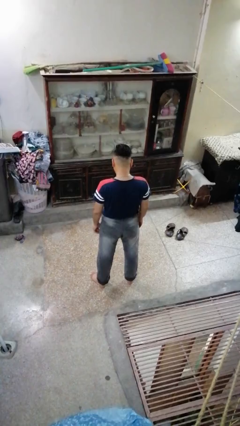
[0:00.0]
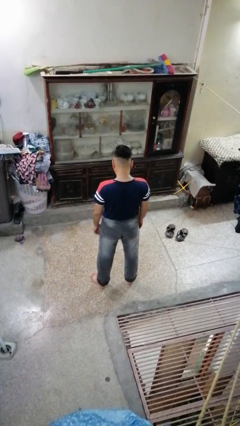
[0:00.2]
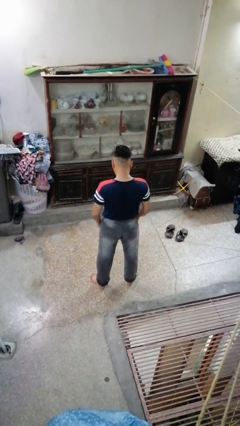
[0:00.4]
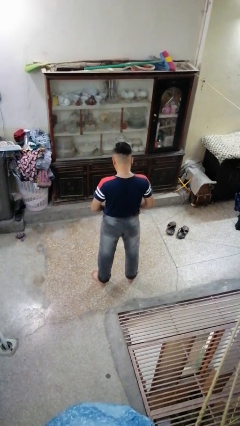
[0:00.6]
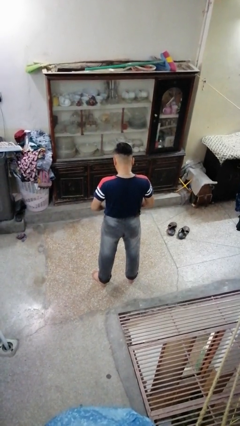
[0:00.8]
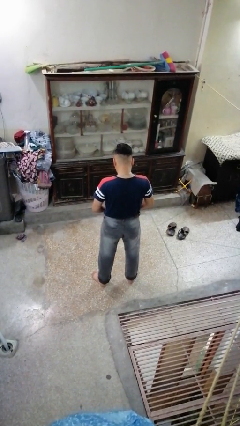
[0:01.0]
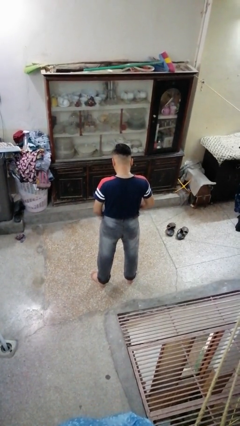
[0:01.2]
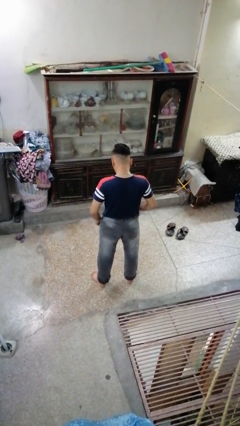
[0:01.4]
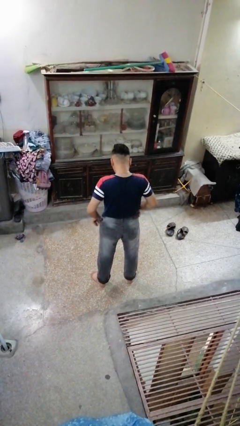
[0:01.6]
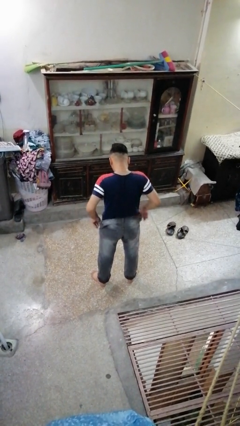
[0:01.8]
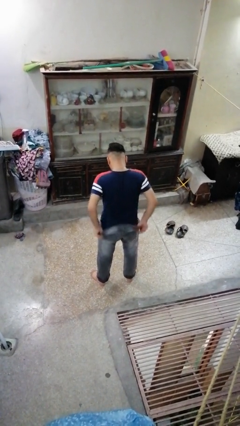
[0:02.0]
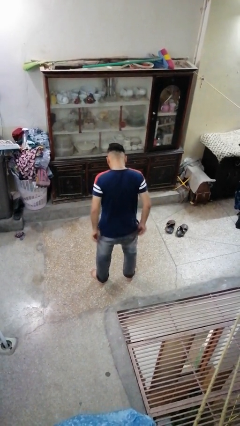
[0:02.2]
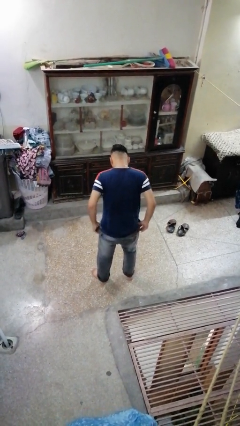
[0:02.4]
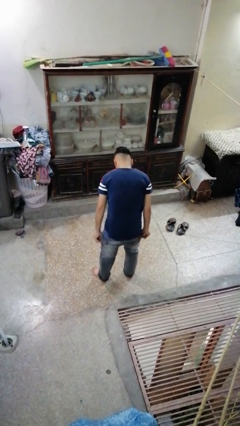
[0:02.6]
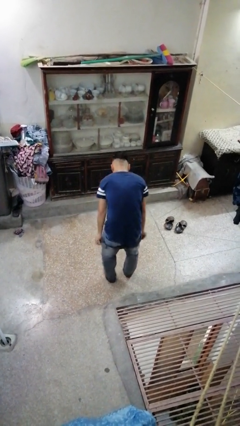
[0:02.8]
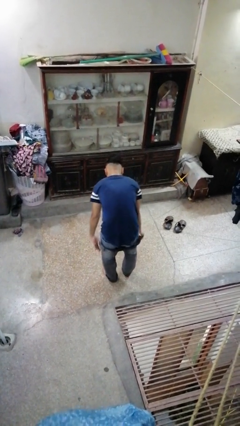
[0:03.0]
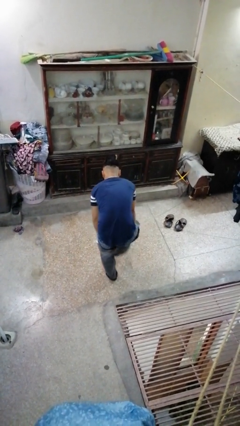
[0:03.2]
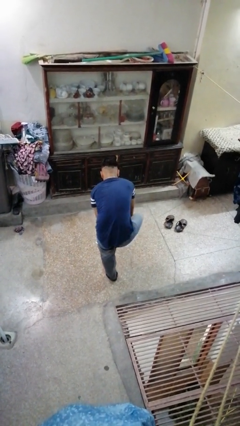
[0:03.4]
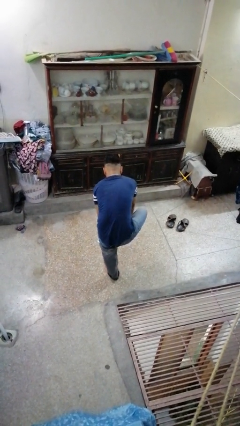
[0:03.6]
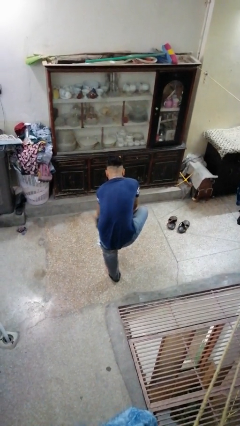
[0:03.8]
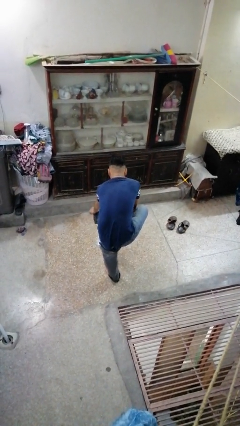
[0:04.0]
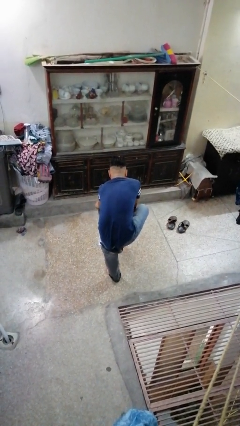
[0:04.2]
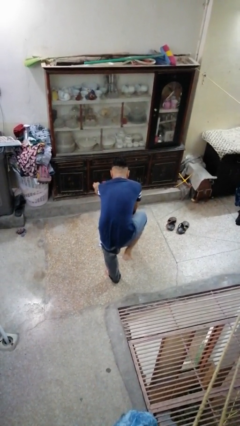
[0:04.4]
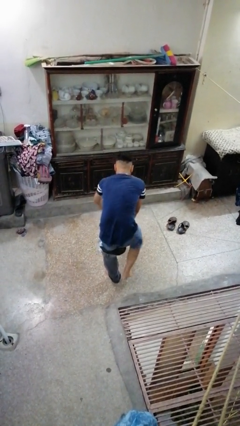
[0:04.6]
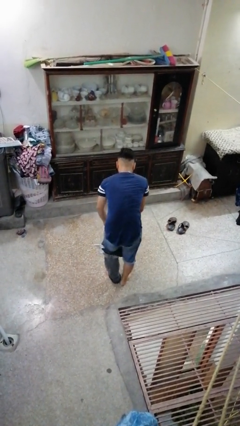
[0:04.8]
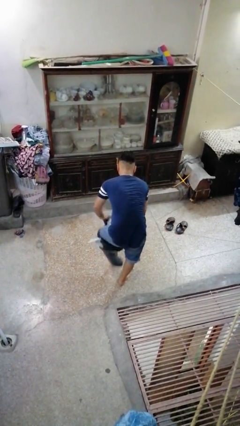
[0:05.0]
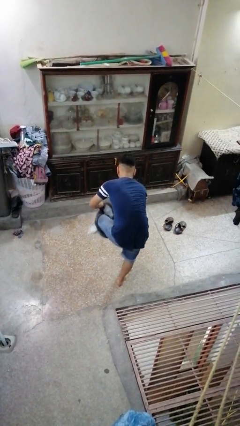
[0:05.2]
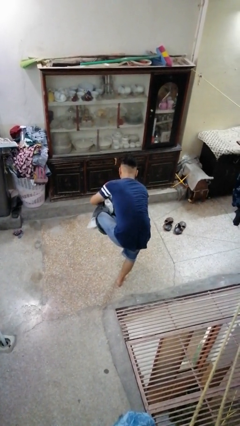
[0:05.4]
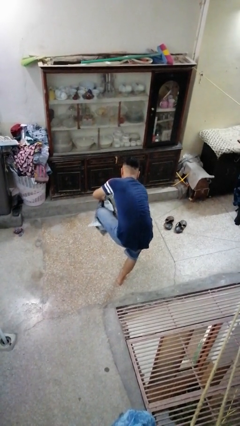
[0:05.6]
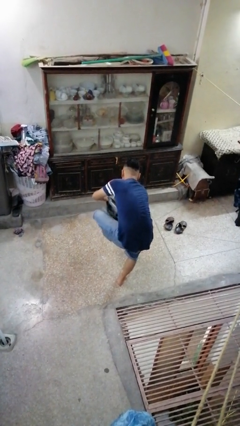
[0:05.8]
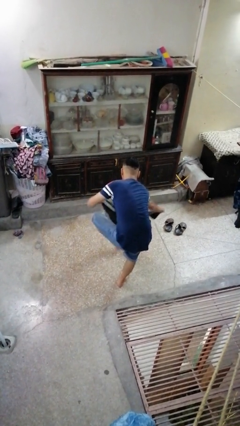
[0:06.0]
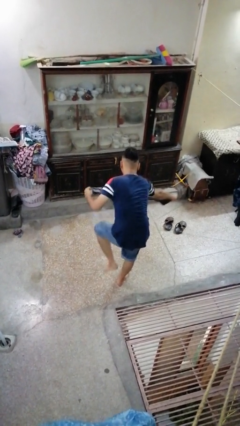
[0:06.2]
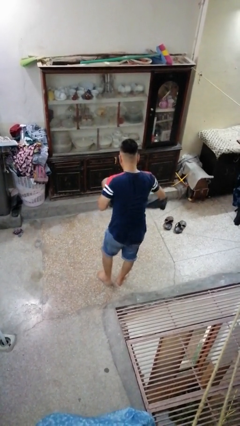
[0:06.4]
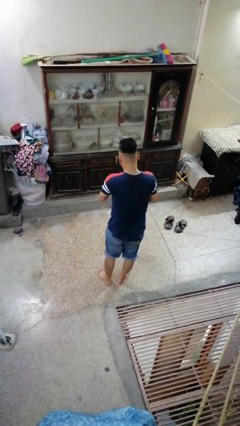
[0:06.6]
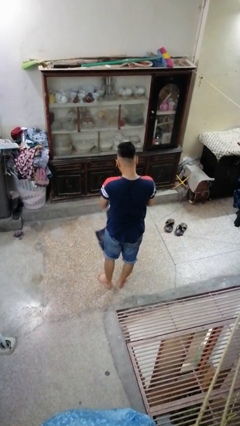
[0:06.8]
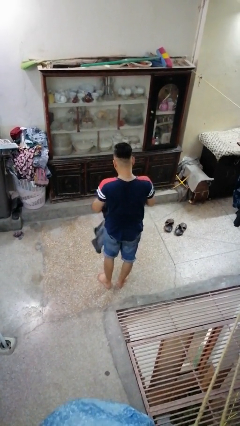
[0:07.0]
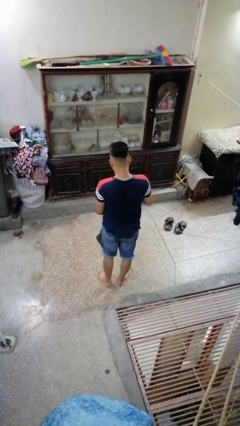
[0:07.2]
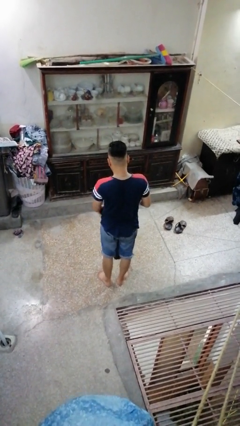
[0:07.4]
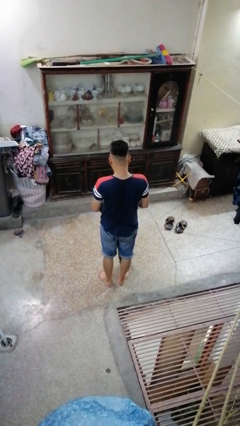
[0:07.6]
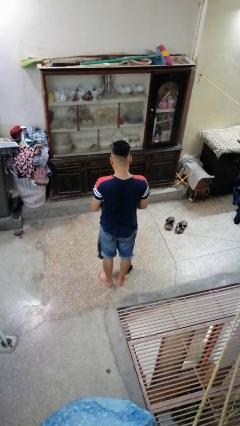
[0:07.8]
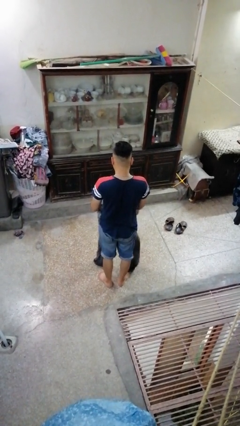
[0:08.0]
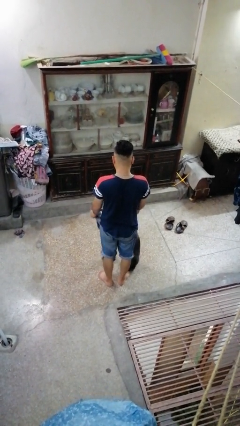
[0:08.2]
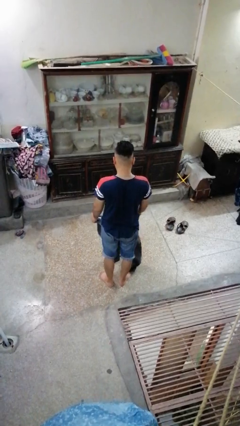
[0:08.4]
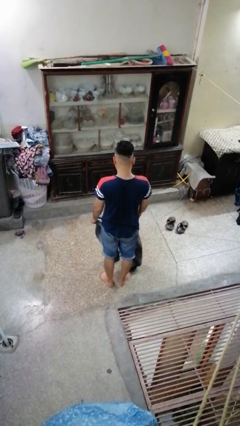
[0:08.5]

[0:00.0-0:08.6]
person takes off pants

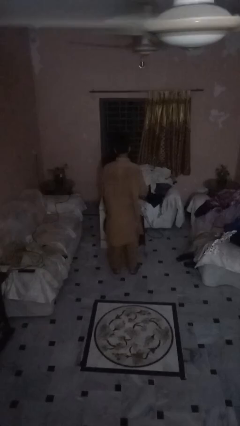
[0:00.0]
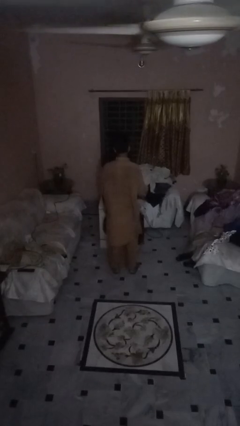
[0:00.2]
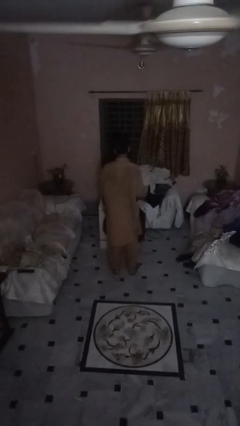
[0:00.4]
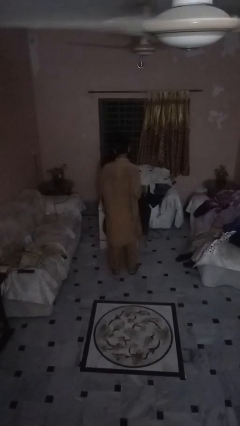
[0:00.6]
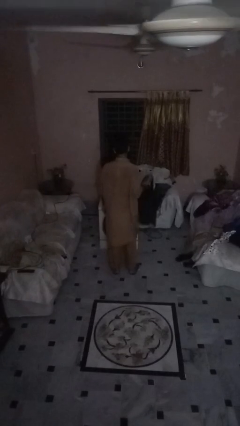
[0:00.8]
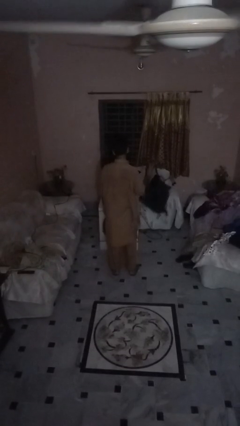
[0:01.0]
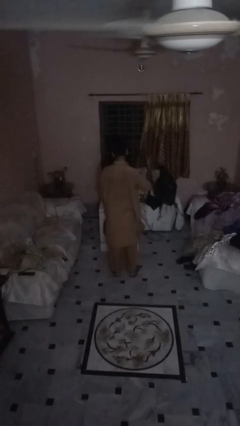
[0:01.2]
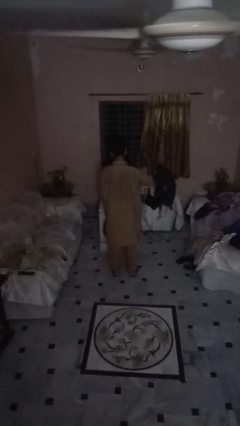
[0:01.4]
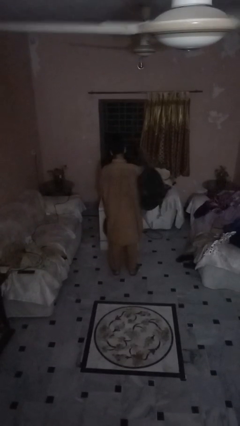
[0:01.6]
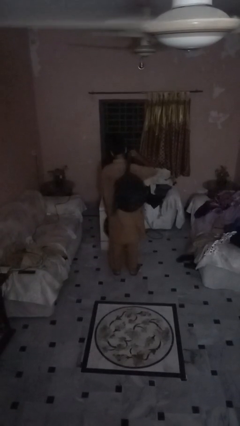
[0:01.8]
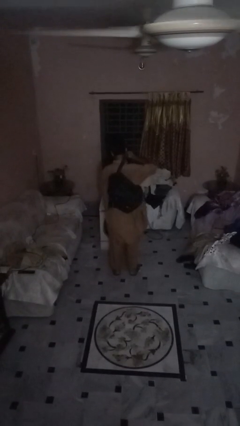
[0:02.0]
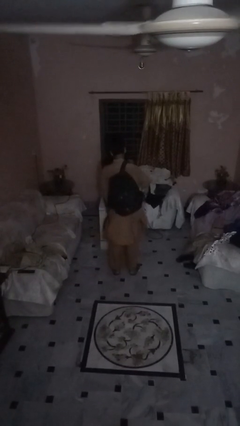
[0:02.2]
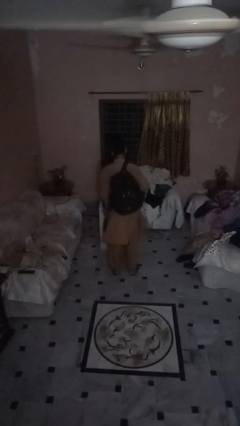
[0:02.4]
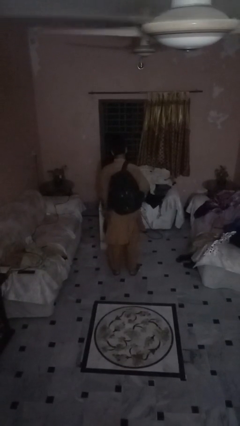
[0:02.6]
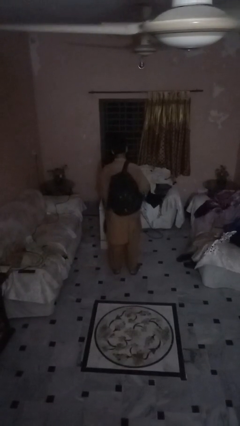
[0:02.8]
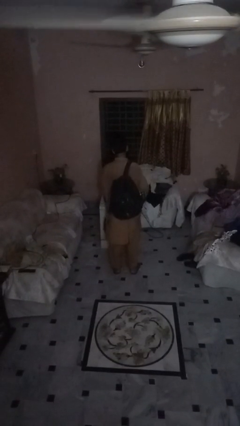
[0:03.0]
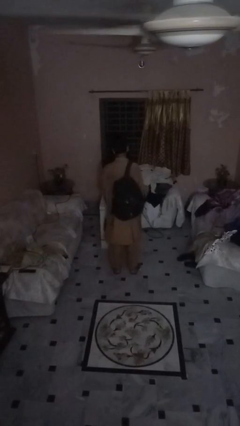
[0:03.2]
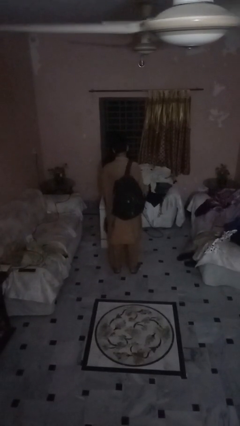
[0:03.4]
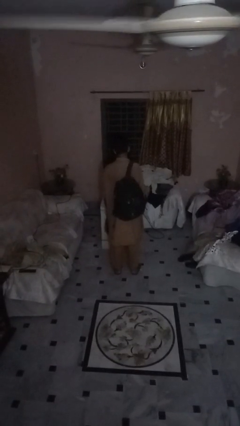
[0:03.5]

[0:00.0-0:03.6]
person puts on backpack

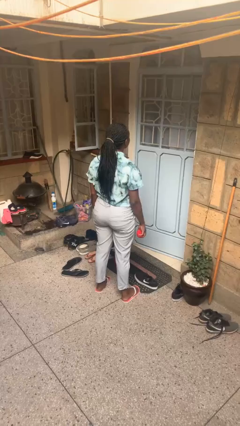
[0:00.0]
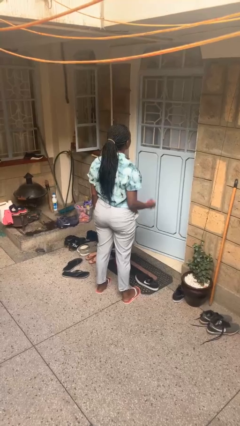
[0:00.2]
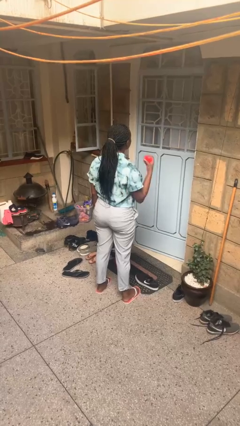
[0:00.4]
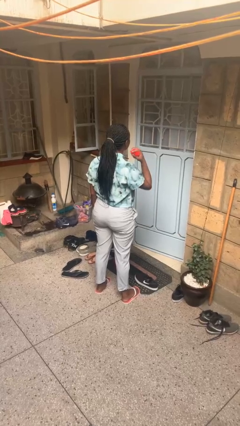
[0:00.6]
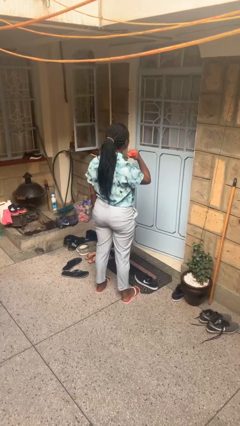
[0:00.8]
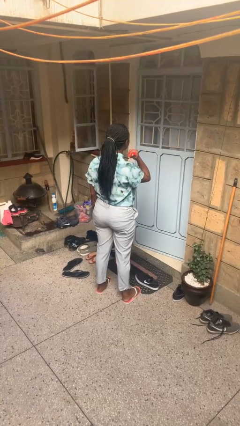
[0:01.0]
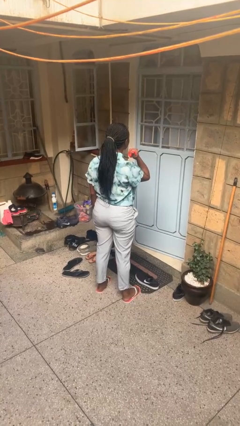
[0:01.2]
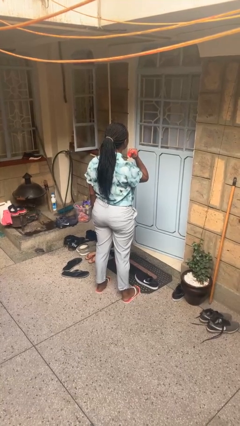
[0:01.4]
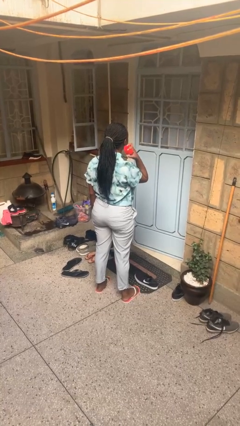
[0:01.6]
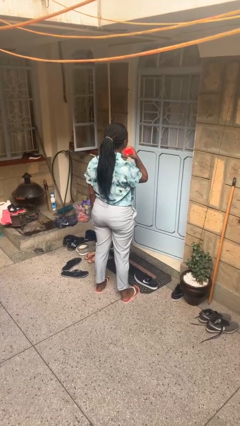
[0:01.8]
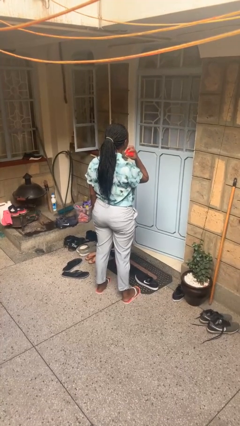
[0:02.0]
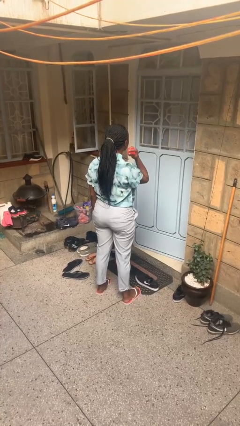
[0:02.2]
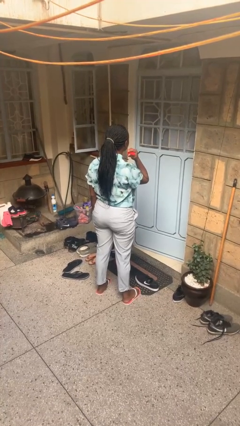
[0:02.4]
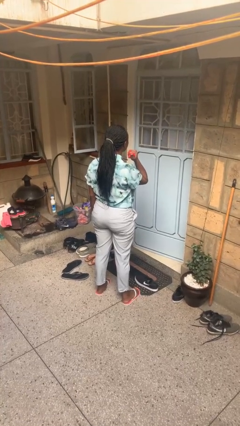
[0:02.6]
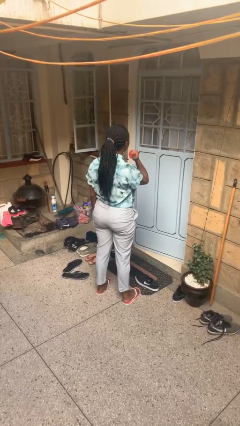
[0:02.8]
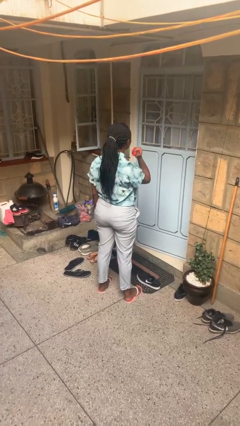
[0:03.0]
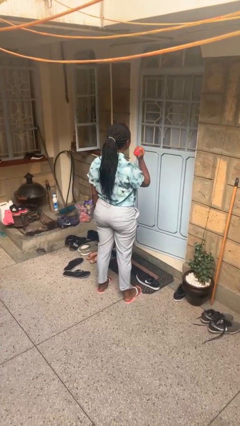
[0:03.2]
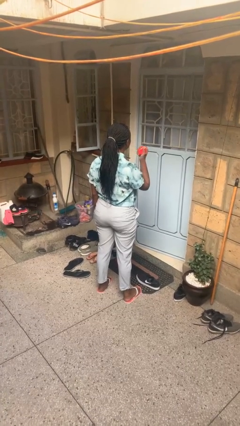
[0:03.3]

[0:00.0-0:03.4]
person squeezes object

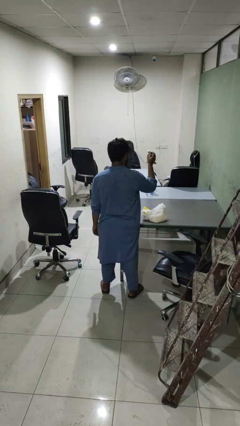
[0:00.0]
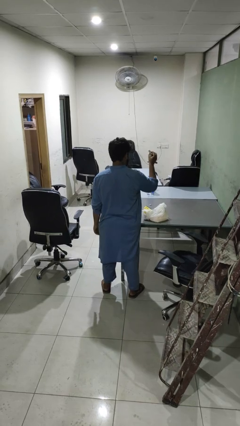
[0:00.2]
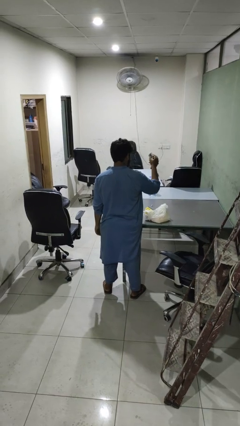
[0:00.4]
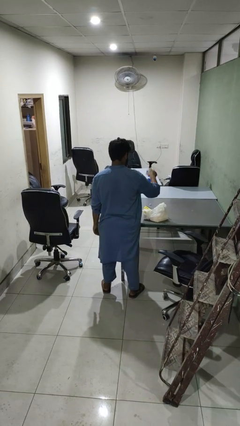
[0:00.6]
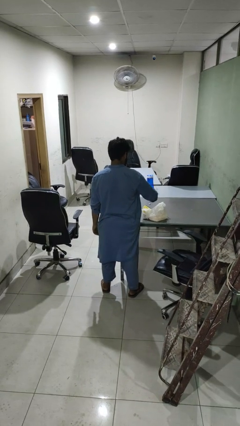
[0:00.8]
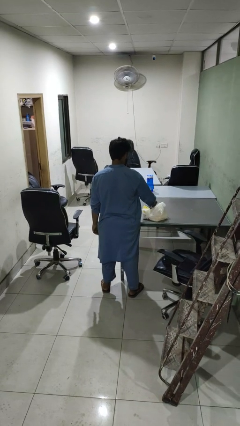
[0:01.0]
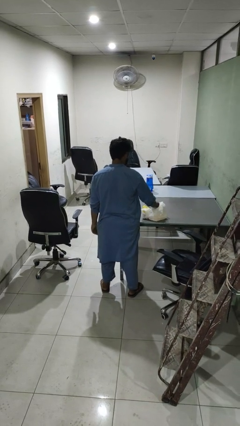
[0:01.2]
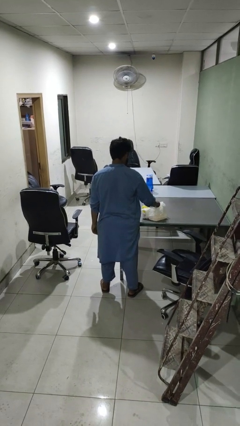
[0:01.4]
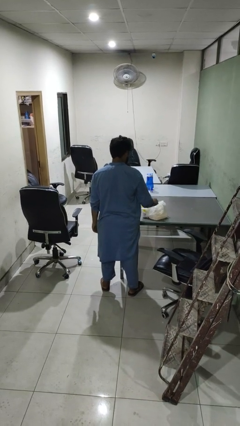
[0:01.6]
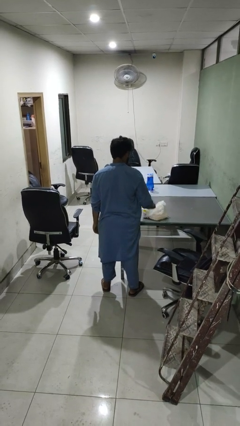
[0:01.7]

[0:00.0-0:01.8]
person puts object into bag

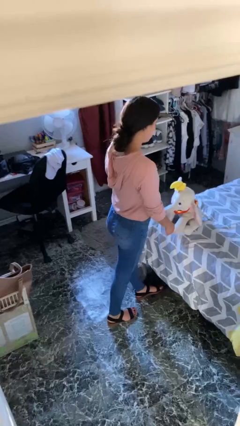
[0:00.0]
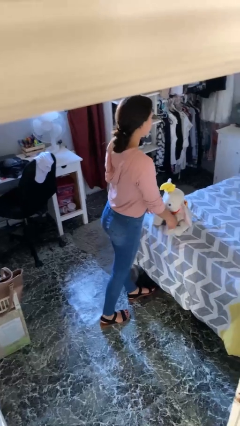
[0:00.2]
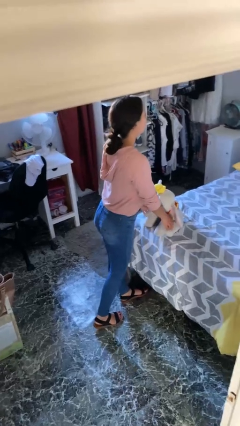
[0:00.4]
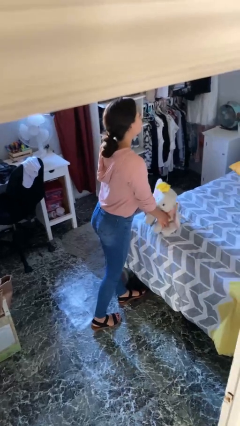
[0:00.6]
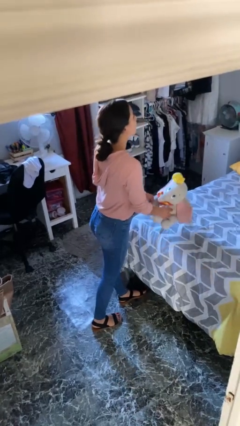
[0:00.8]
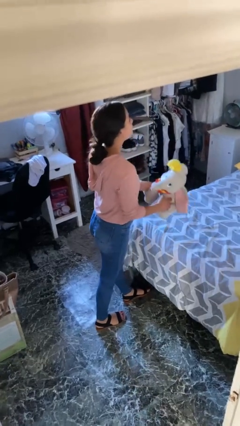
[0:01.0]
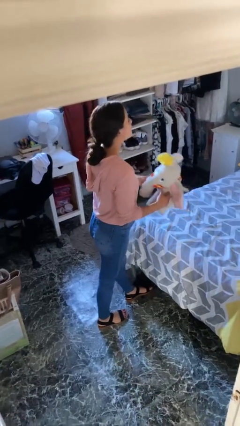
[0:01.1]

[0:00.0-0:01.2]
person picks up object from bed
